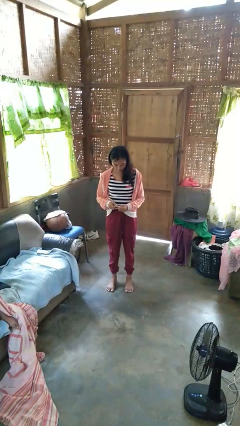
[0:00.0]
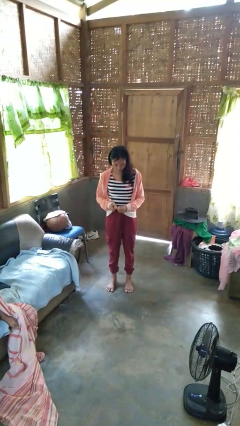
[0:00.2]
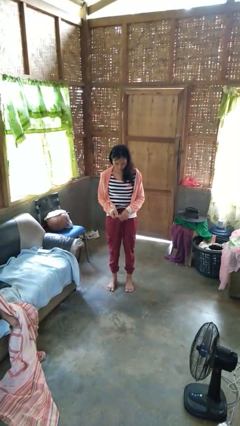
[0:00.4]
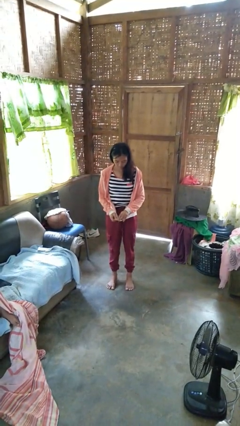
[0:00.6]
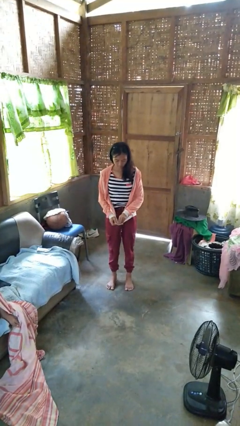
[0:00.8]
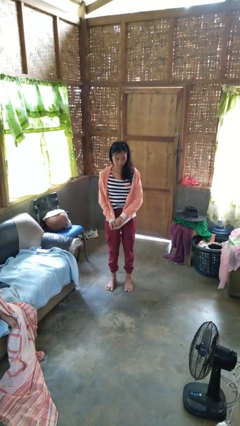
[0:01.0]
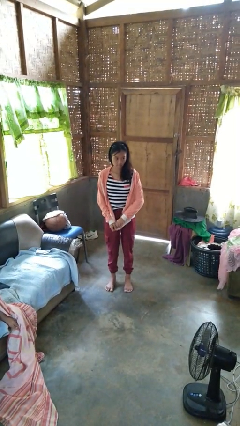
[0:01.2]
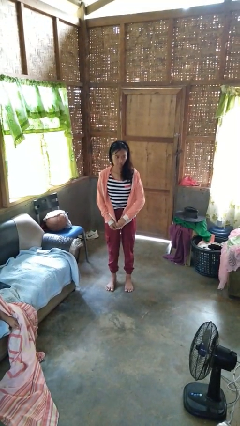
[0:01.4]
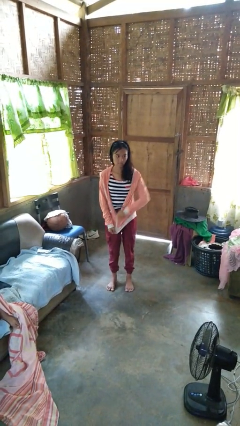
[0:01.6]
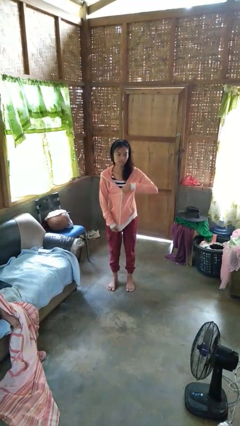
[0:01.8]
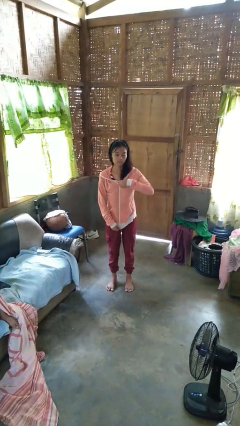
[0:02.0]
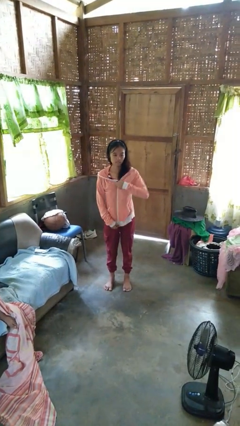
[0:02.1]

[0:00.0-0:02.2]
person zips up jacket

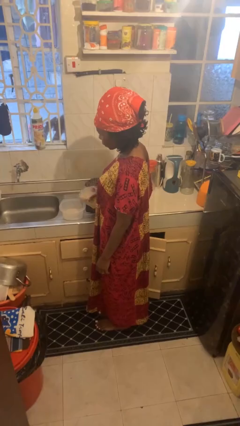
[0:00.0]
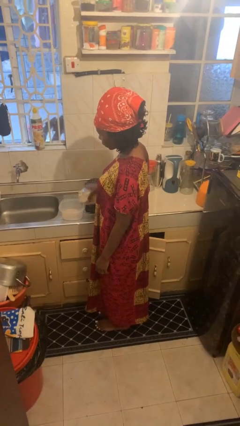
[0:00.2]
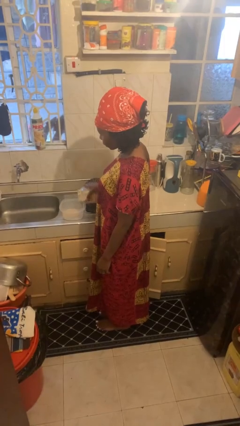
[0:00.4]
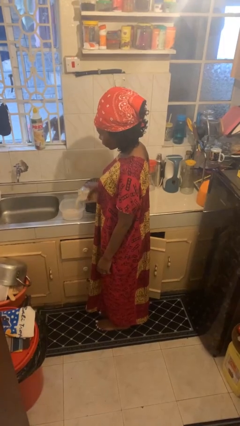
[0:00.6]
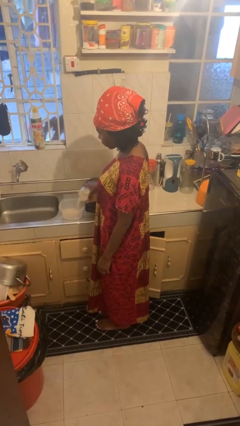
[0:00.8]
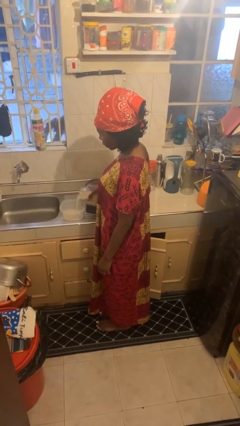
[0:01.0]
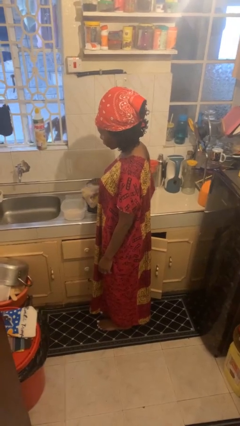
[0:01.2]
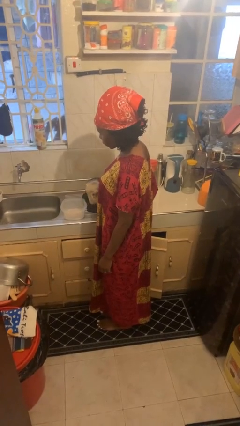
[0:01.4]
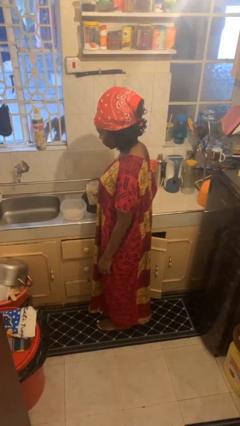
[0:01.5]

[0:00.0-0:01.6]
person pours into bowl

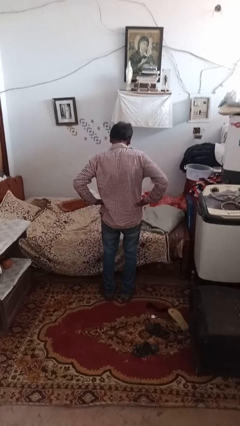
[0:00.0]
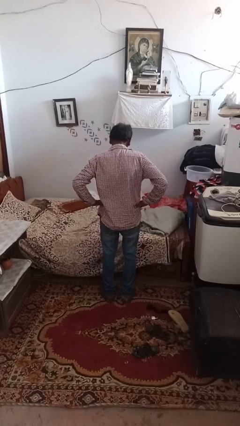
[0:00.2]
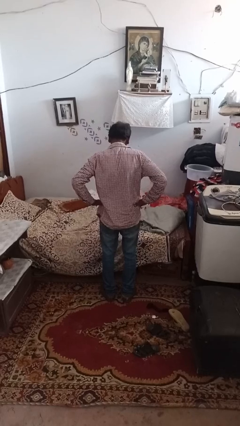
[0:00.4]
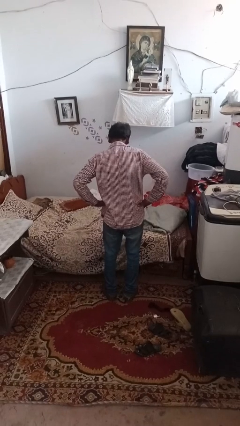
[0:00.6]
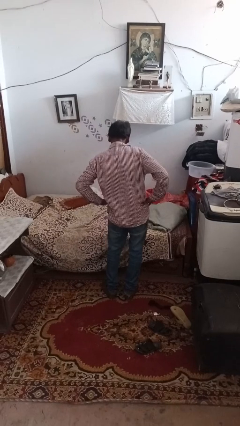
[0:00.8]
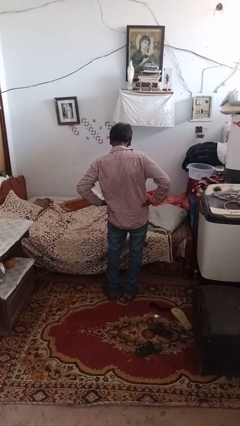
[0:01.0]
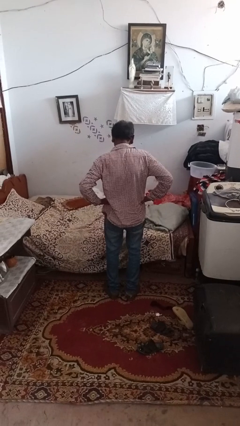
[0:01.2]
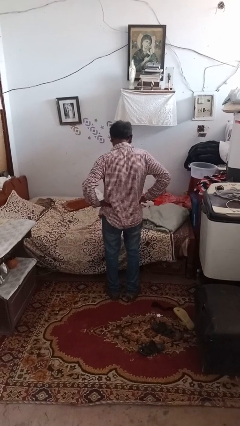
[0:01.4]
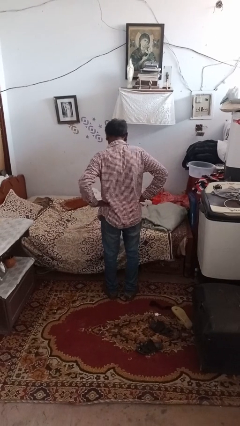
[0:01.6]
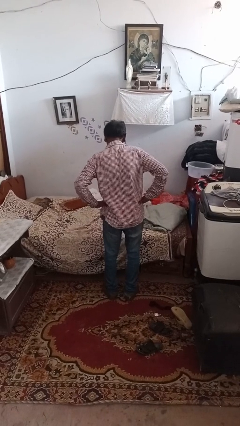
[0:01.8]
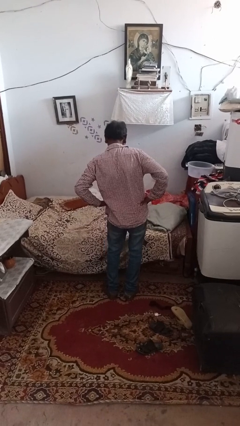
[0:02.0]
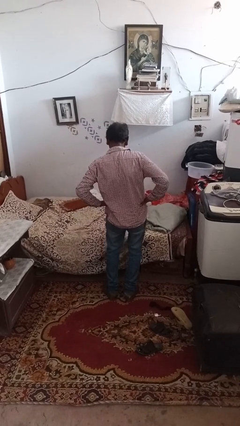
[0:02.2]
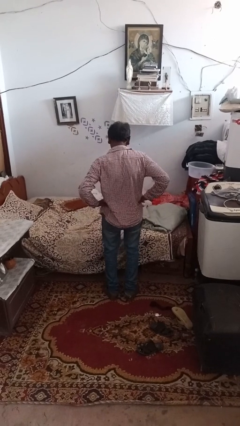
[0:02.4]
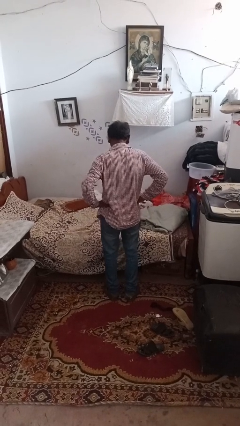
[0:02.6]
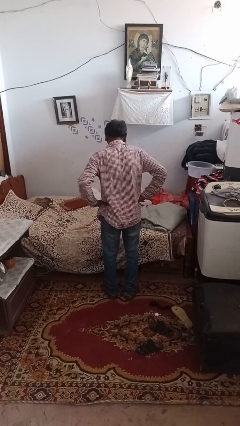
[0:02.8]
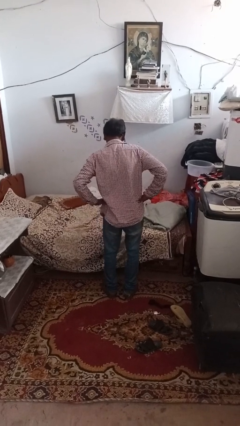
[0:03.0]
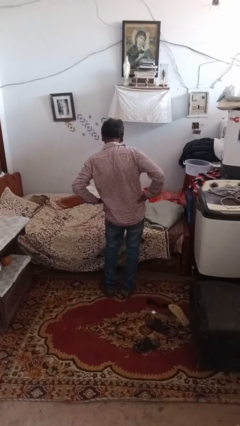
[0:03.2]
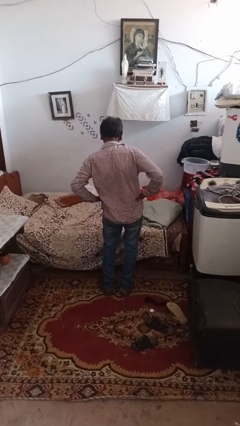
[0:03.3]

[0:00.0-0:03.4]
person wiggles hips

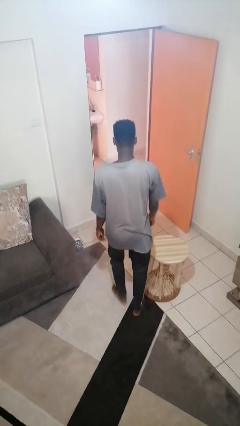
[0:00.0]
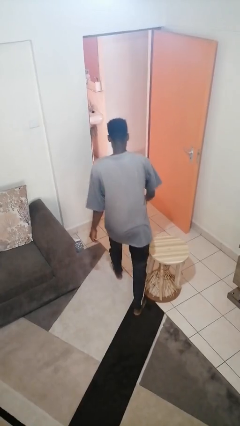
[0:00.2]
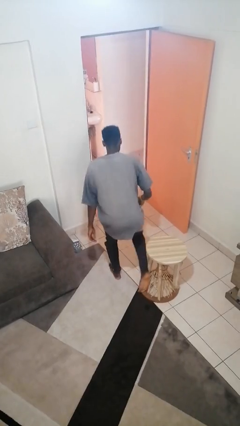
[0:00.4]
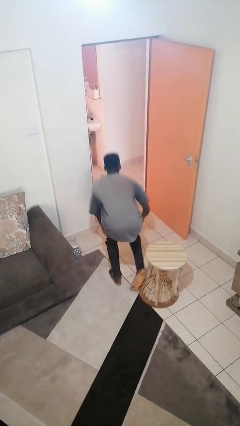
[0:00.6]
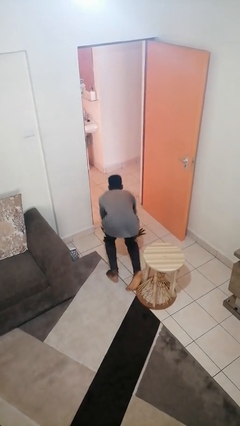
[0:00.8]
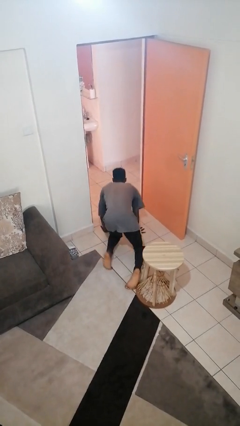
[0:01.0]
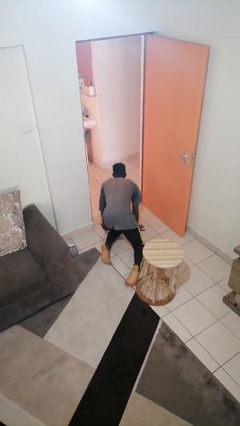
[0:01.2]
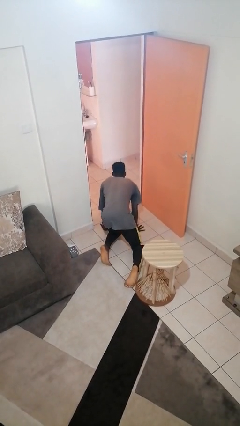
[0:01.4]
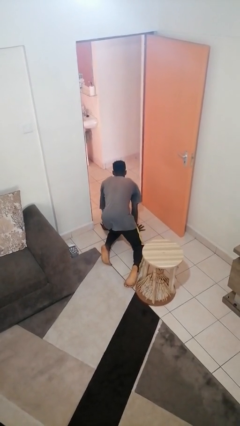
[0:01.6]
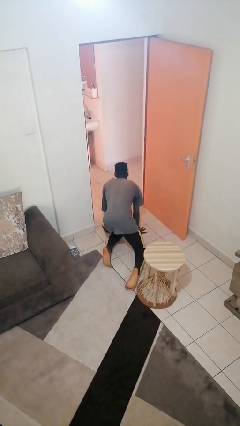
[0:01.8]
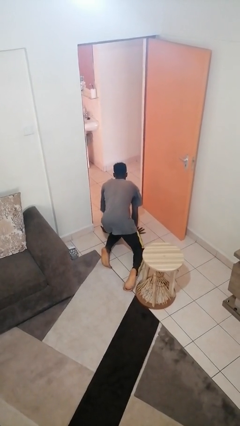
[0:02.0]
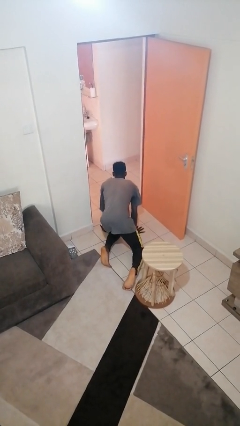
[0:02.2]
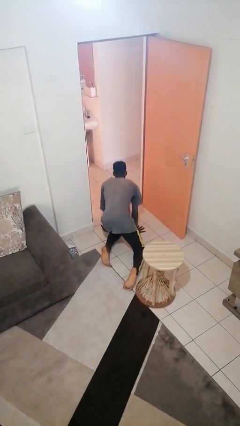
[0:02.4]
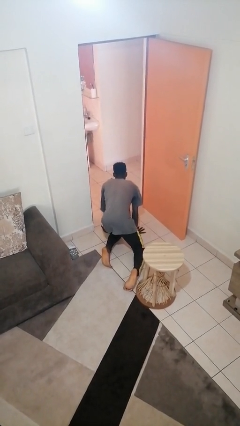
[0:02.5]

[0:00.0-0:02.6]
person trips on object on floor

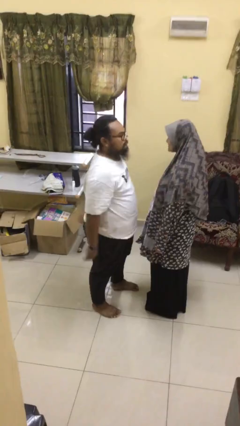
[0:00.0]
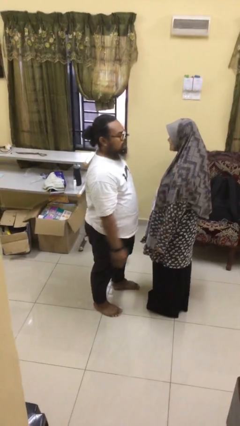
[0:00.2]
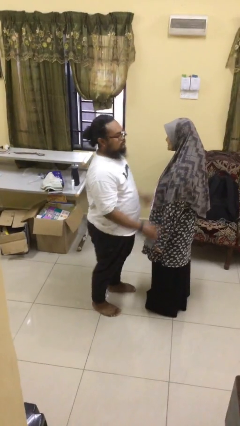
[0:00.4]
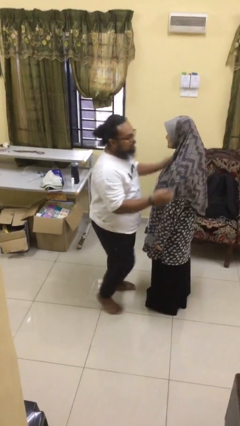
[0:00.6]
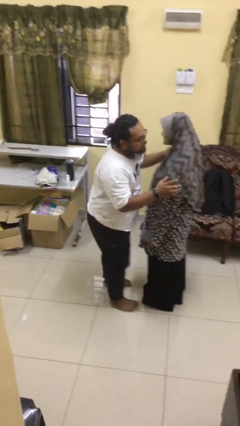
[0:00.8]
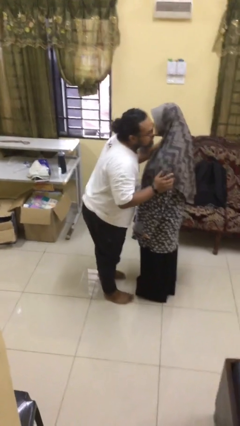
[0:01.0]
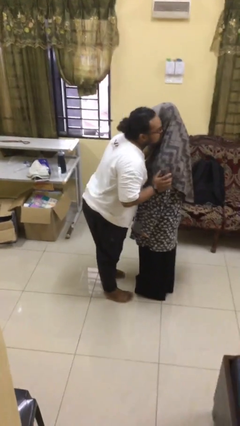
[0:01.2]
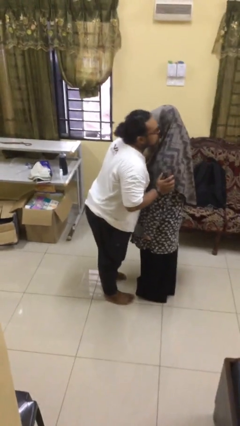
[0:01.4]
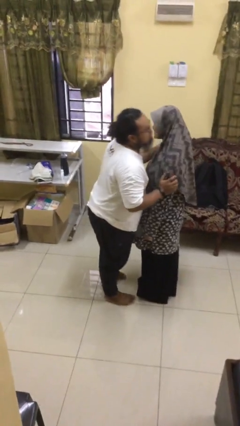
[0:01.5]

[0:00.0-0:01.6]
person kisses cheek of person

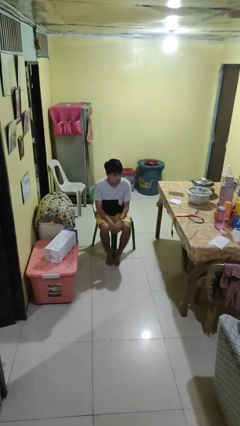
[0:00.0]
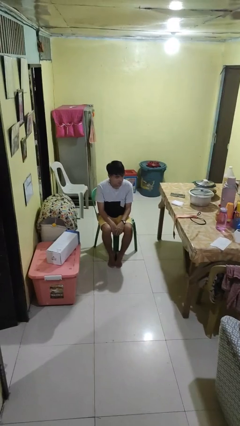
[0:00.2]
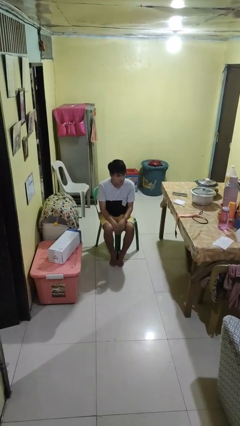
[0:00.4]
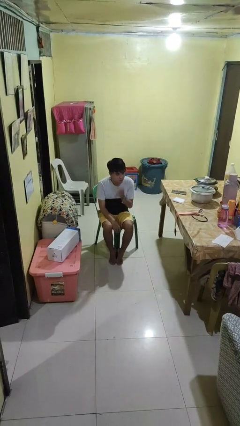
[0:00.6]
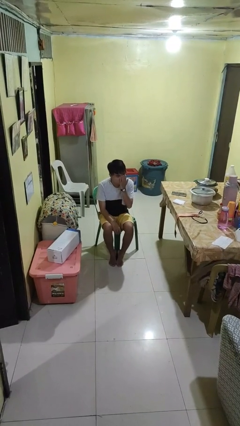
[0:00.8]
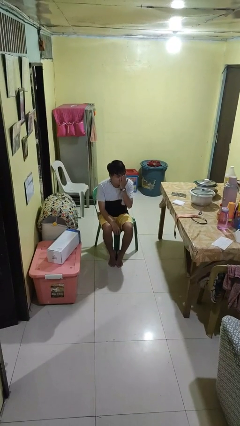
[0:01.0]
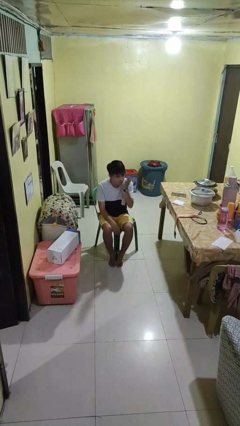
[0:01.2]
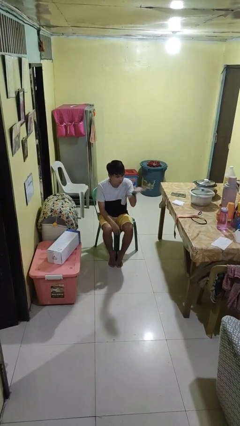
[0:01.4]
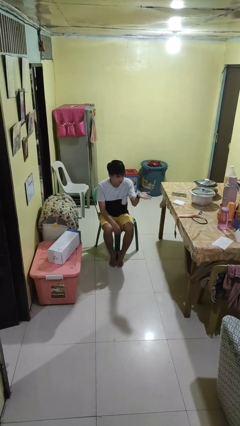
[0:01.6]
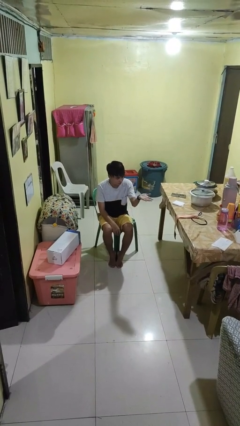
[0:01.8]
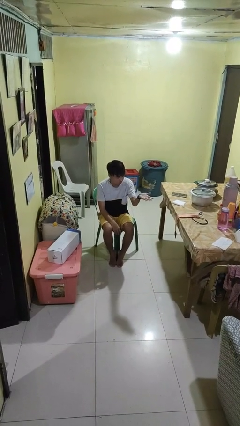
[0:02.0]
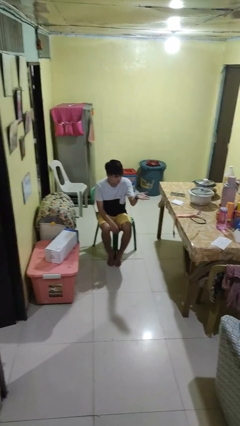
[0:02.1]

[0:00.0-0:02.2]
person gestures blow kiss

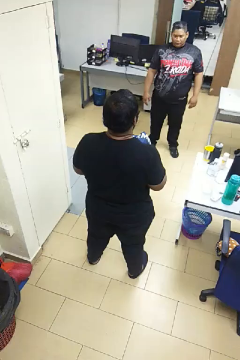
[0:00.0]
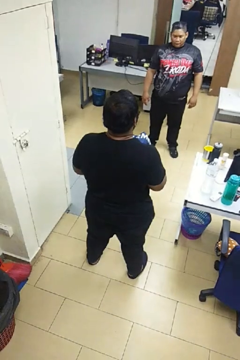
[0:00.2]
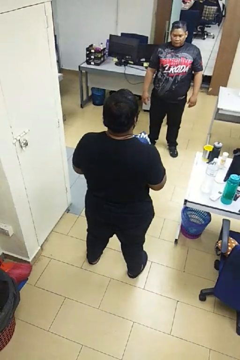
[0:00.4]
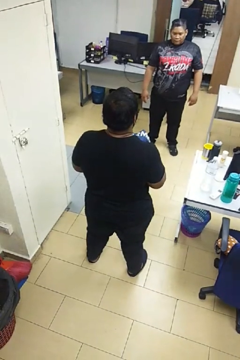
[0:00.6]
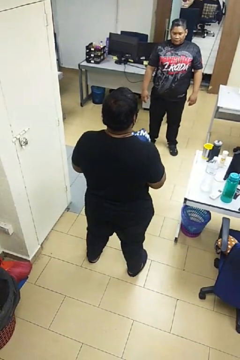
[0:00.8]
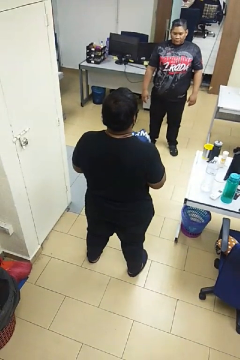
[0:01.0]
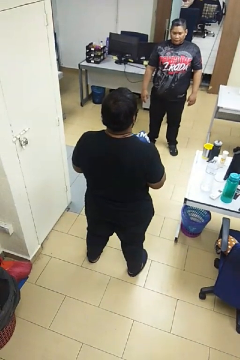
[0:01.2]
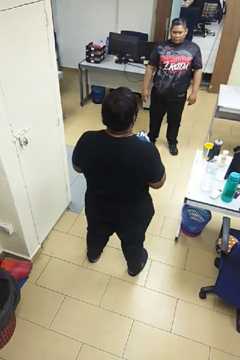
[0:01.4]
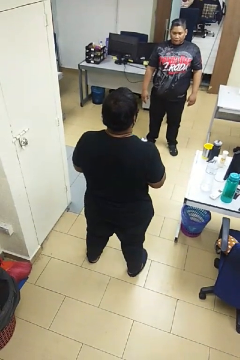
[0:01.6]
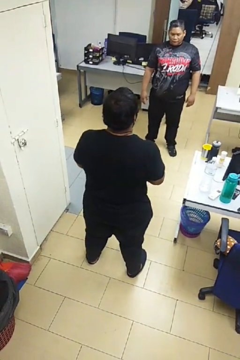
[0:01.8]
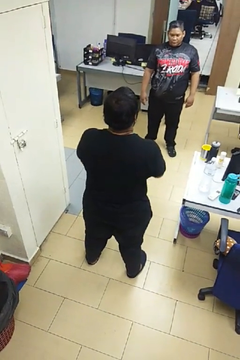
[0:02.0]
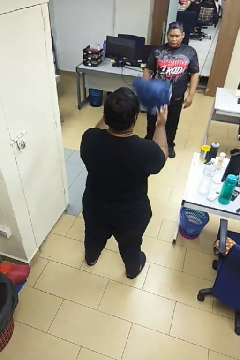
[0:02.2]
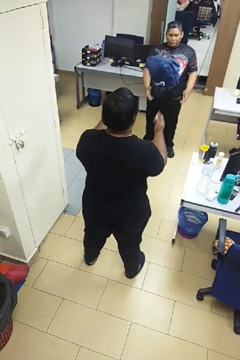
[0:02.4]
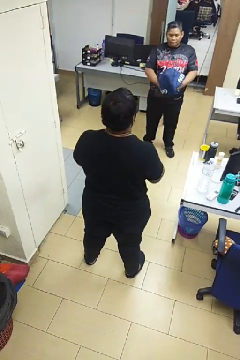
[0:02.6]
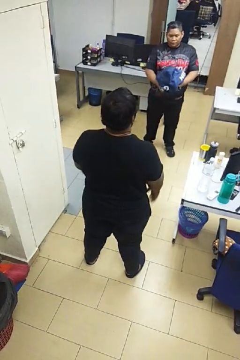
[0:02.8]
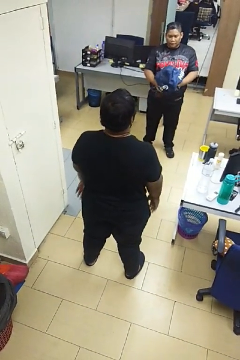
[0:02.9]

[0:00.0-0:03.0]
person throws object to person

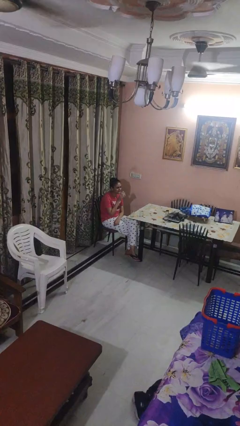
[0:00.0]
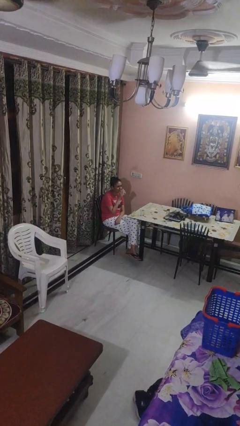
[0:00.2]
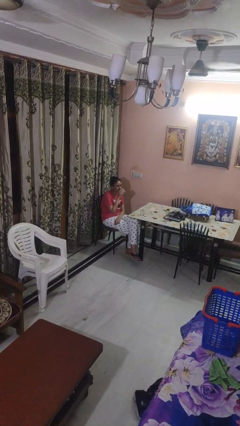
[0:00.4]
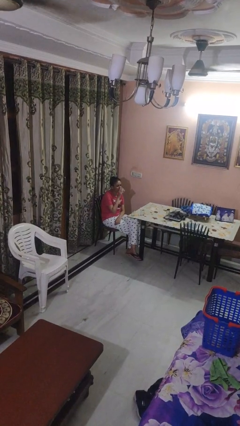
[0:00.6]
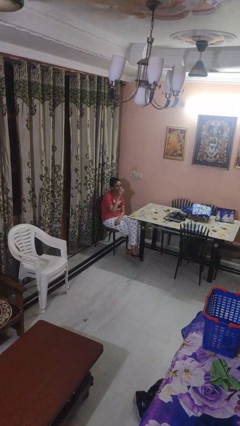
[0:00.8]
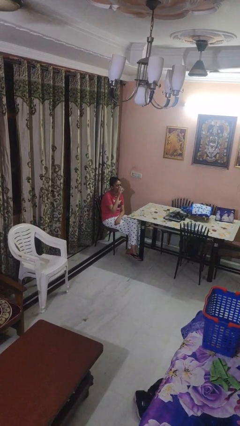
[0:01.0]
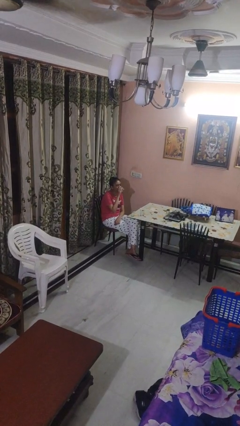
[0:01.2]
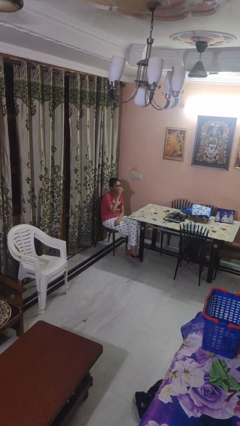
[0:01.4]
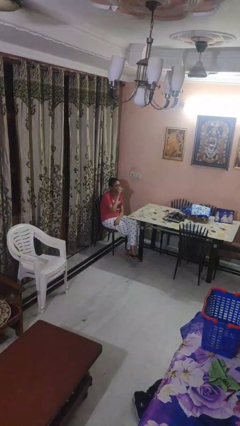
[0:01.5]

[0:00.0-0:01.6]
person drinks from shotglass
